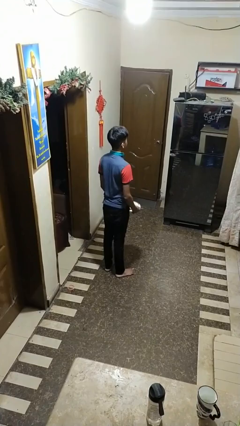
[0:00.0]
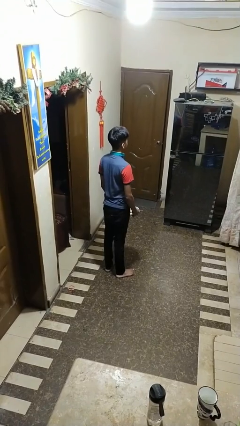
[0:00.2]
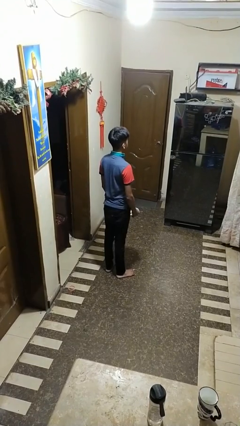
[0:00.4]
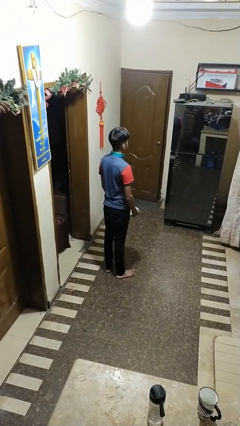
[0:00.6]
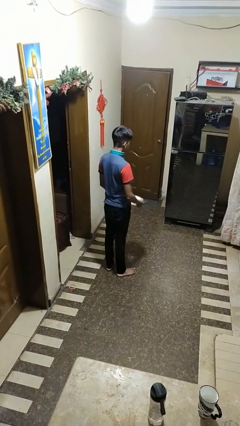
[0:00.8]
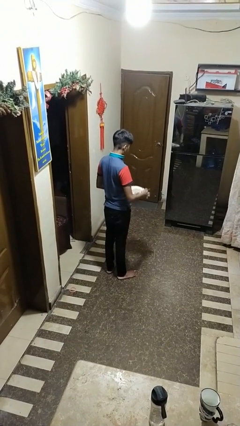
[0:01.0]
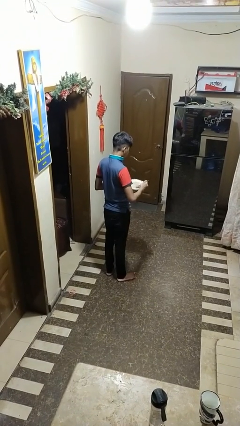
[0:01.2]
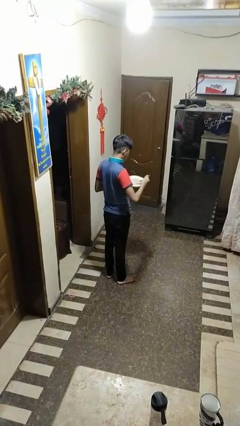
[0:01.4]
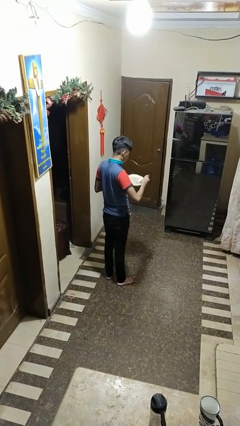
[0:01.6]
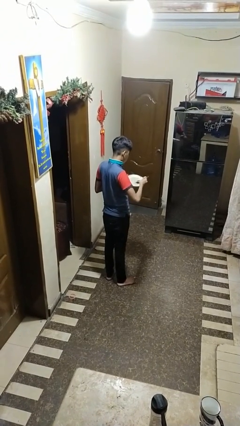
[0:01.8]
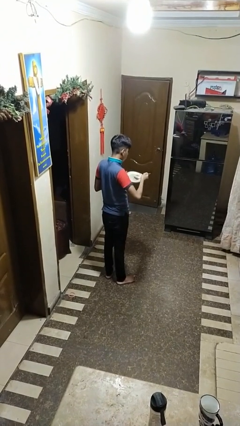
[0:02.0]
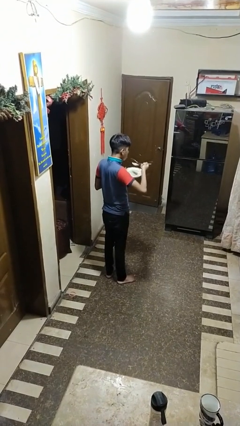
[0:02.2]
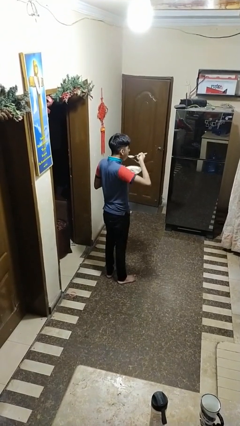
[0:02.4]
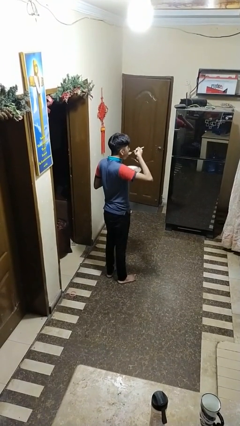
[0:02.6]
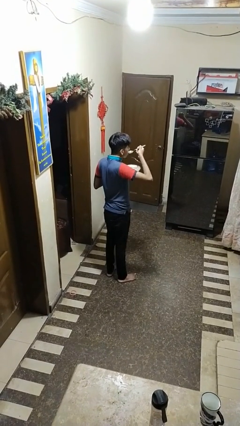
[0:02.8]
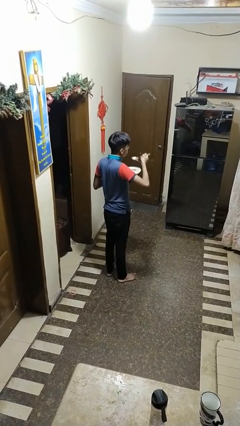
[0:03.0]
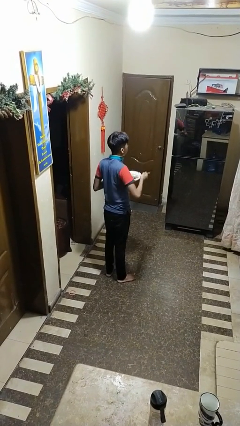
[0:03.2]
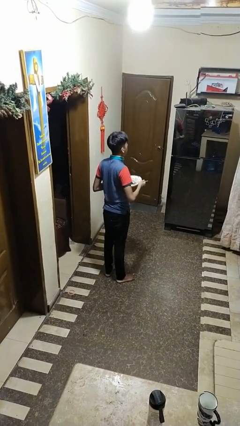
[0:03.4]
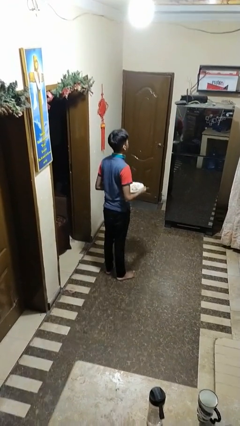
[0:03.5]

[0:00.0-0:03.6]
person eats with utensil

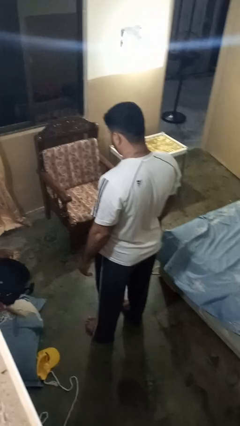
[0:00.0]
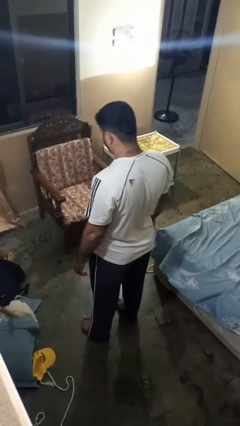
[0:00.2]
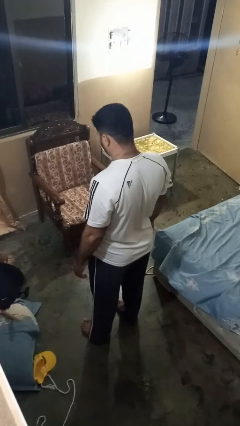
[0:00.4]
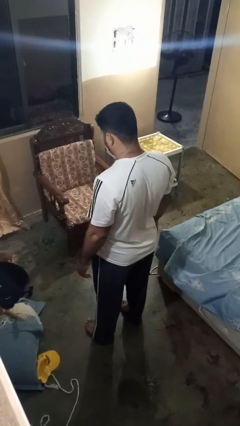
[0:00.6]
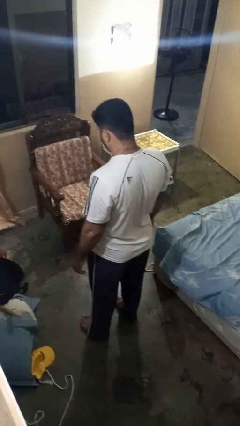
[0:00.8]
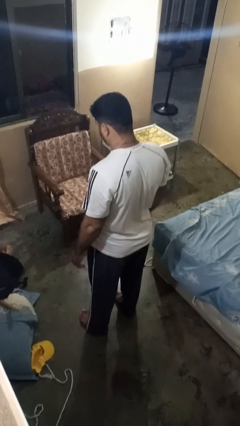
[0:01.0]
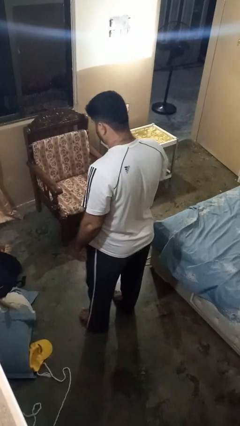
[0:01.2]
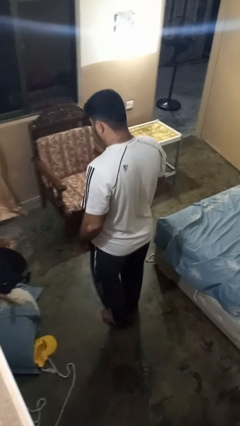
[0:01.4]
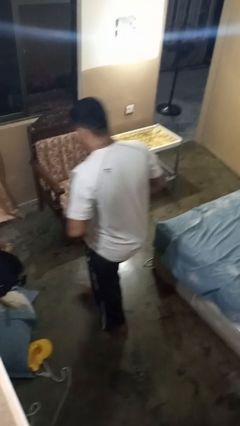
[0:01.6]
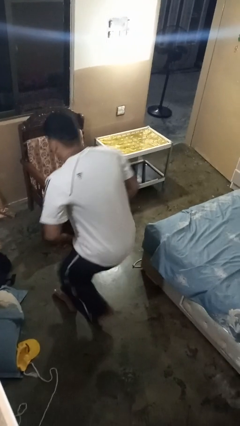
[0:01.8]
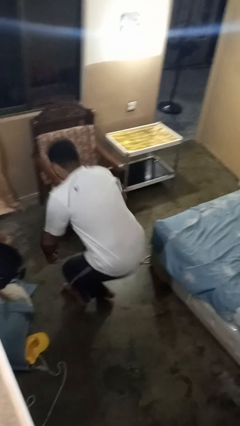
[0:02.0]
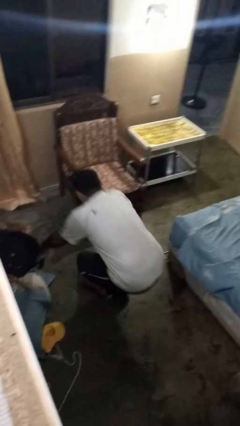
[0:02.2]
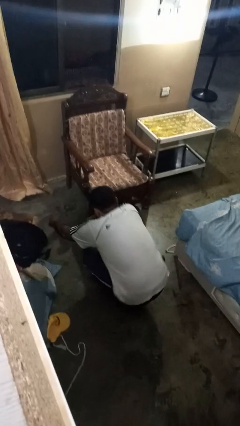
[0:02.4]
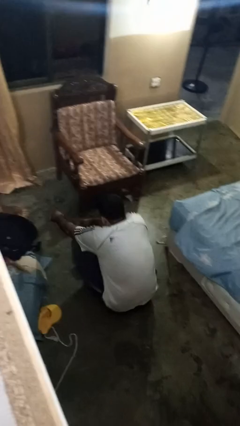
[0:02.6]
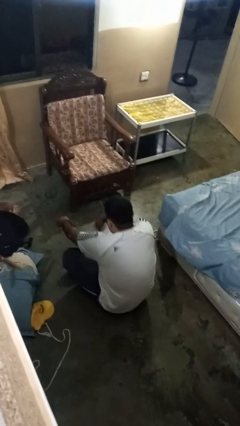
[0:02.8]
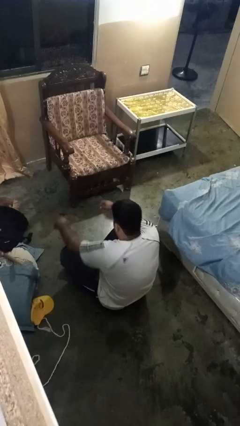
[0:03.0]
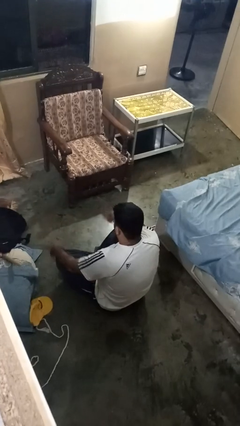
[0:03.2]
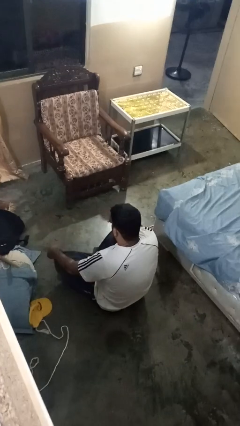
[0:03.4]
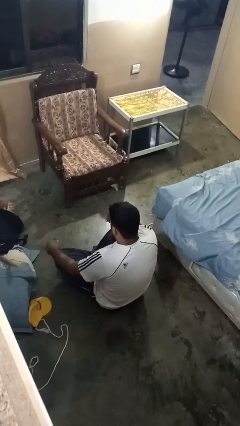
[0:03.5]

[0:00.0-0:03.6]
person crosses legs

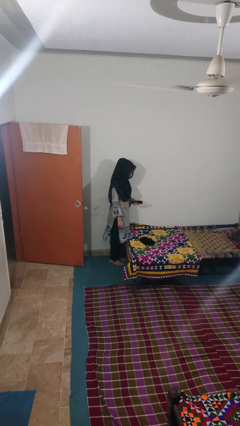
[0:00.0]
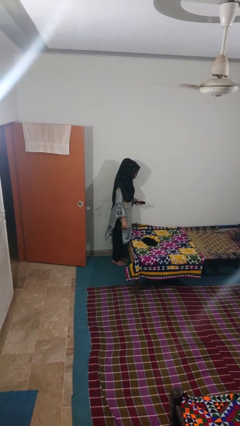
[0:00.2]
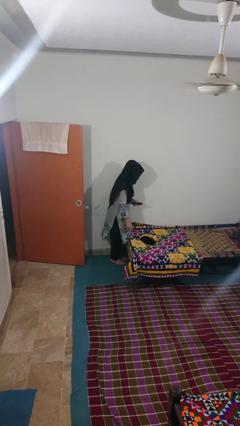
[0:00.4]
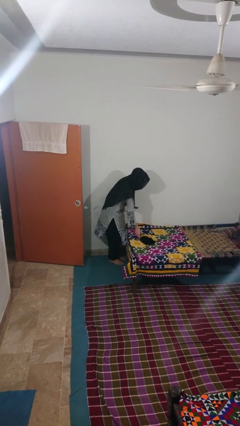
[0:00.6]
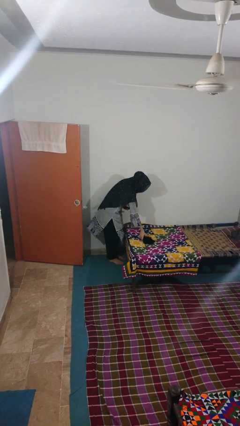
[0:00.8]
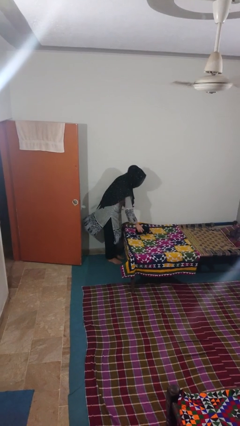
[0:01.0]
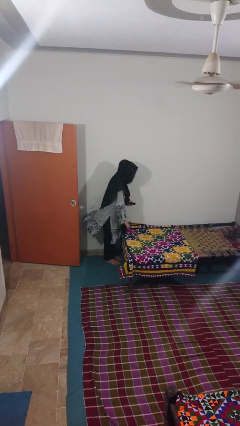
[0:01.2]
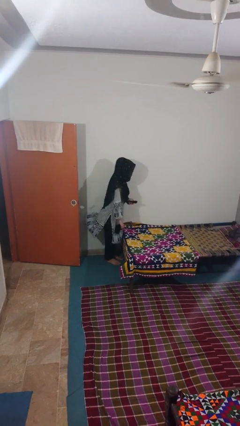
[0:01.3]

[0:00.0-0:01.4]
person picks up object from bed

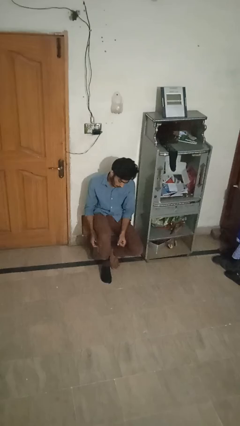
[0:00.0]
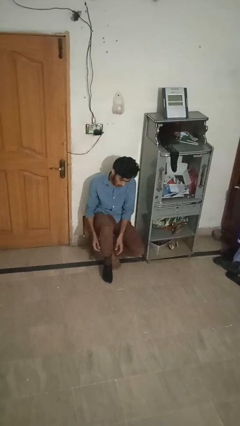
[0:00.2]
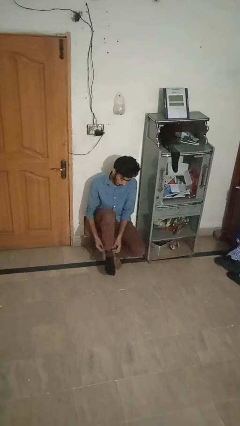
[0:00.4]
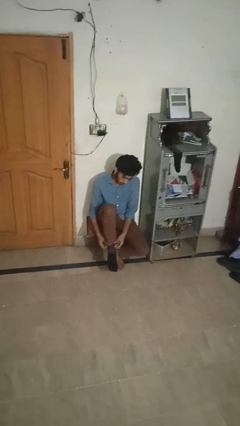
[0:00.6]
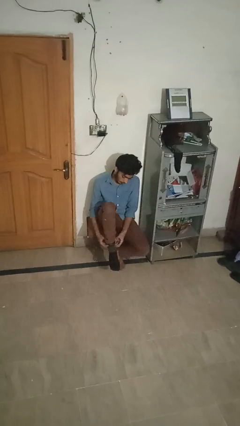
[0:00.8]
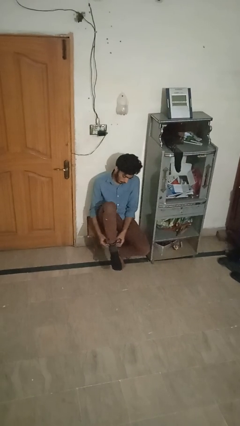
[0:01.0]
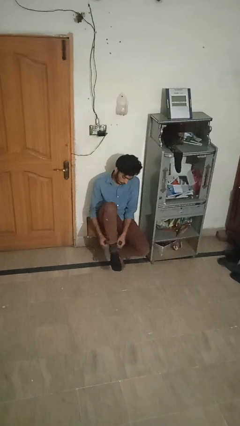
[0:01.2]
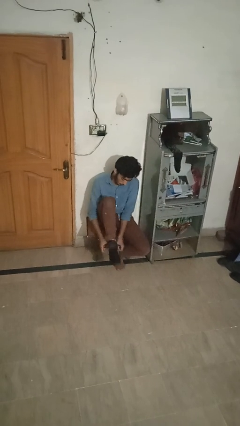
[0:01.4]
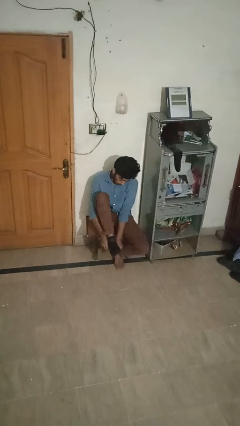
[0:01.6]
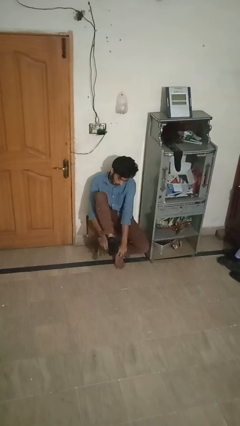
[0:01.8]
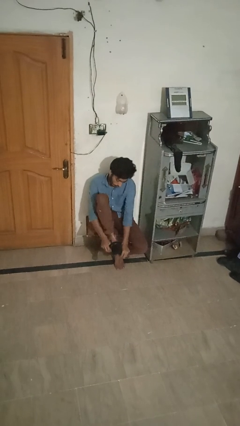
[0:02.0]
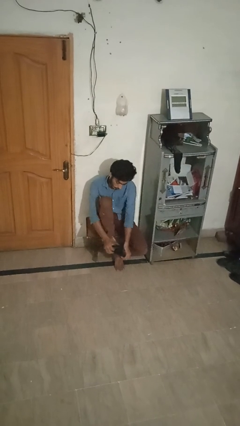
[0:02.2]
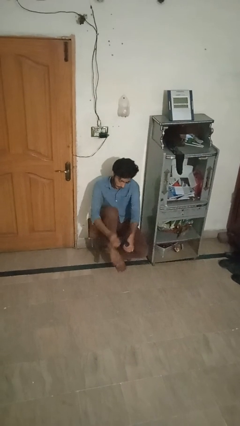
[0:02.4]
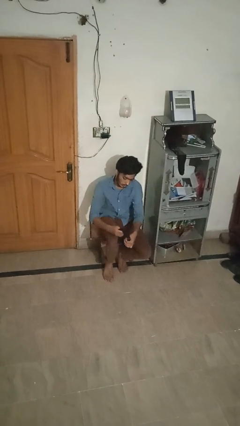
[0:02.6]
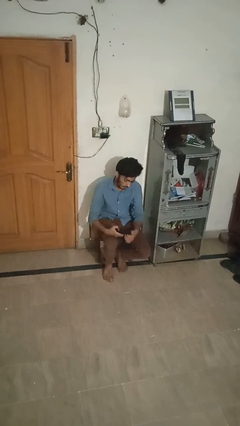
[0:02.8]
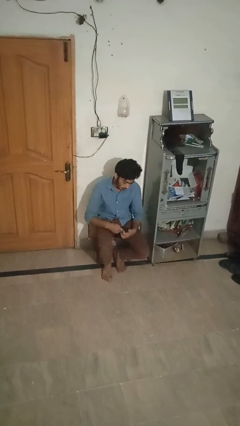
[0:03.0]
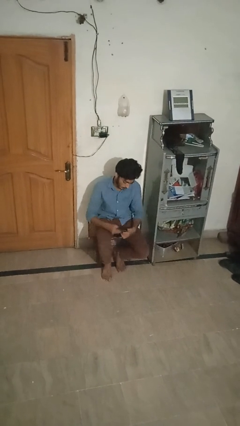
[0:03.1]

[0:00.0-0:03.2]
person takes off socks

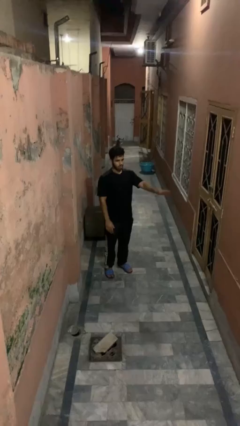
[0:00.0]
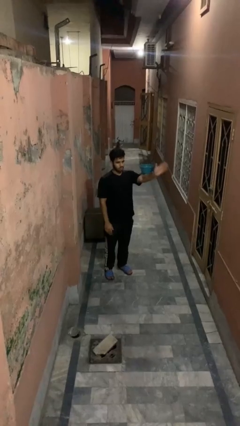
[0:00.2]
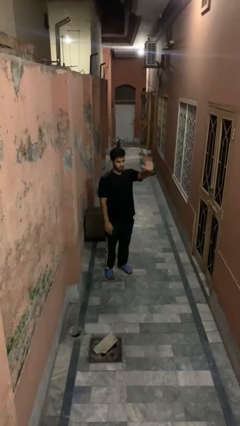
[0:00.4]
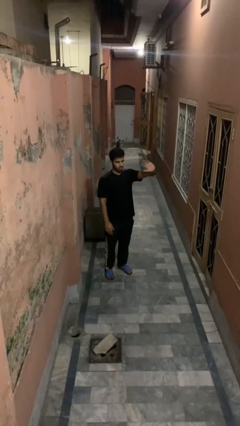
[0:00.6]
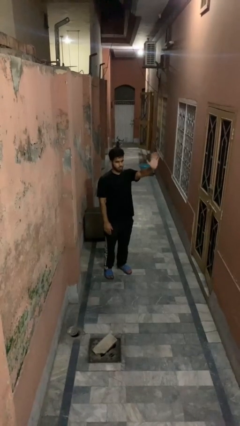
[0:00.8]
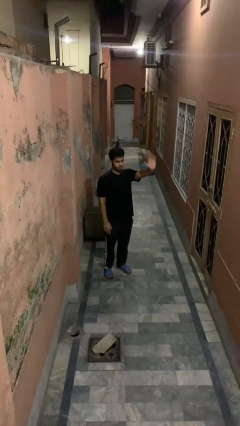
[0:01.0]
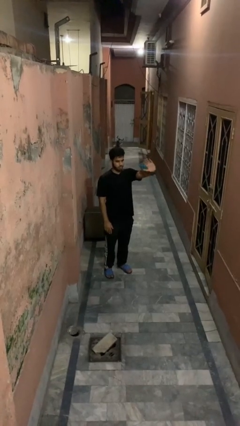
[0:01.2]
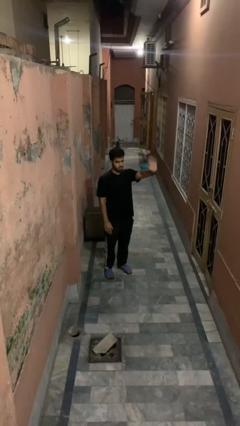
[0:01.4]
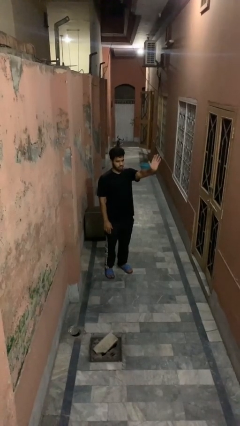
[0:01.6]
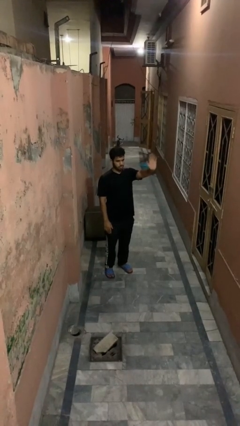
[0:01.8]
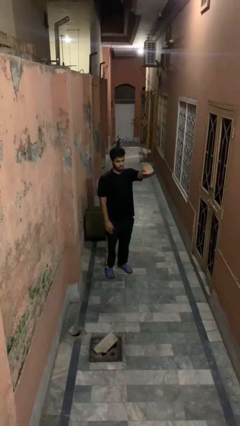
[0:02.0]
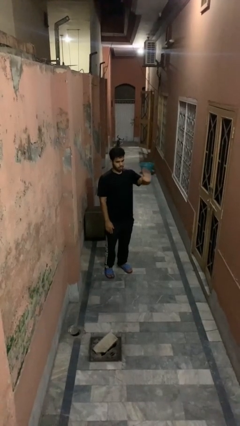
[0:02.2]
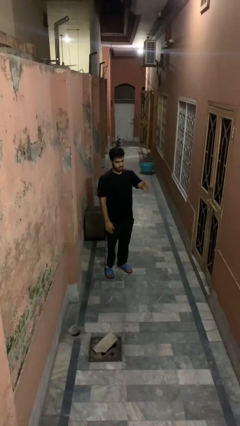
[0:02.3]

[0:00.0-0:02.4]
person waves at person

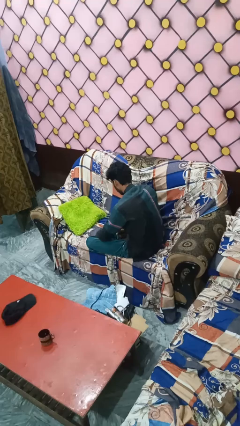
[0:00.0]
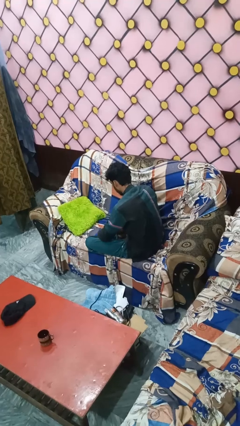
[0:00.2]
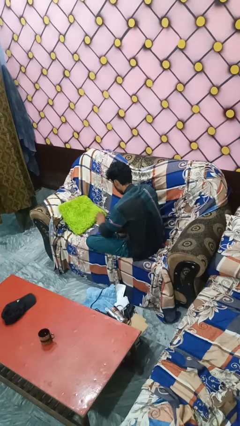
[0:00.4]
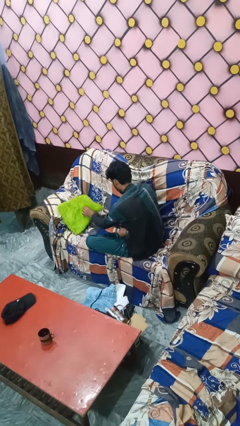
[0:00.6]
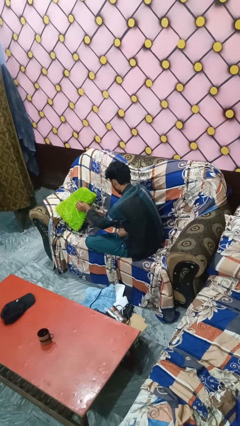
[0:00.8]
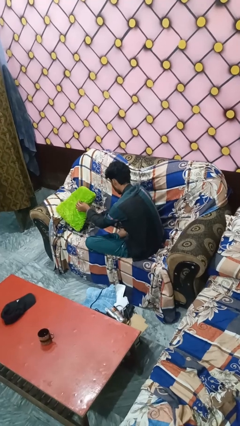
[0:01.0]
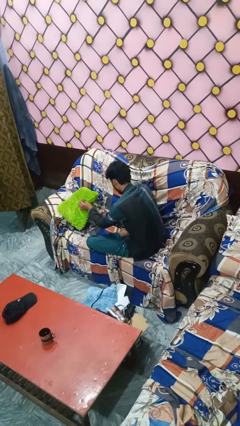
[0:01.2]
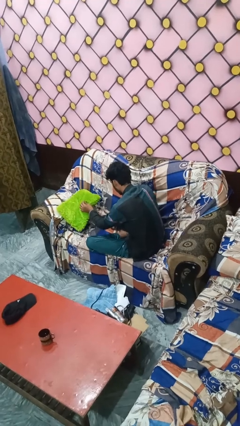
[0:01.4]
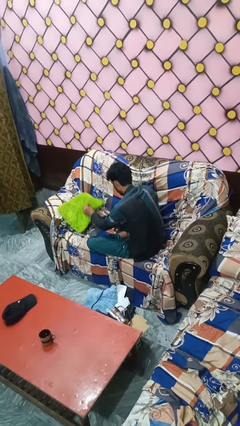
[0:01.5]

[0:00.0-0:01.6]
person searches under couch

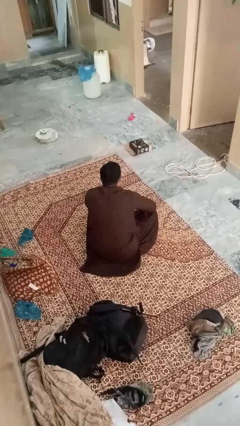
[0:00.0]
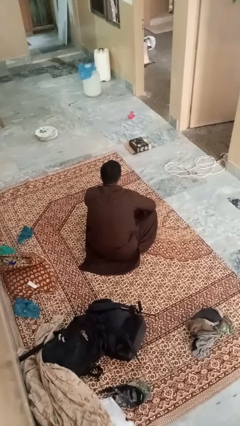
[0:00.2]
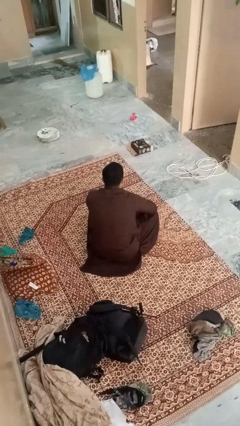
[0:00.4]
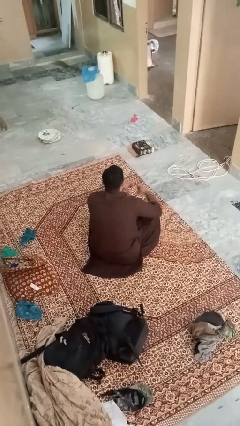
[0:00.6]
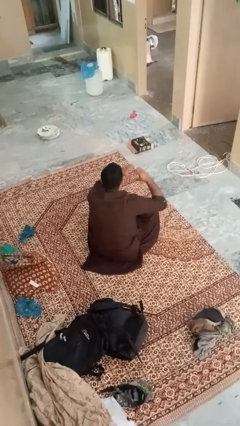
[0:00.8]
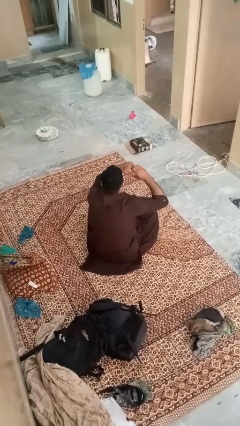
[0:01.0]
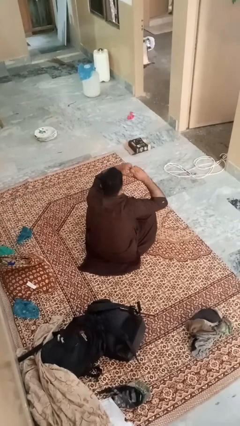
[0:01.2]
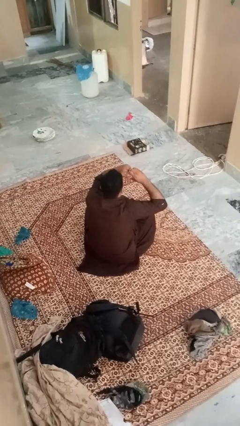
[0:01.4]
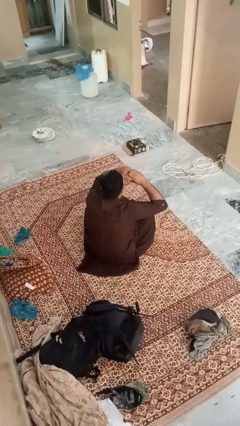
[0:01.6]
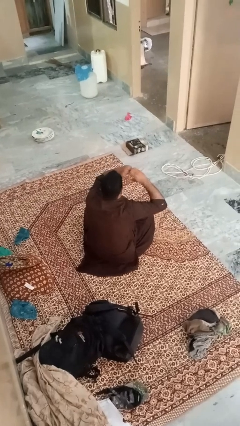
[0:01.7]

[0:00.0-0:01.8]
person gestures heart
